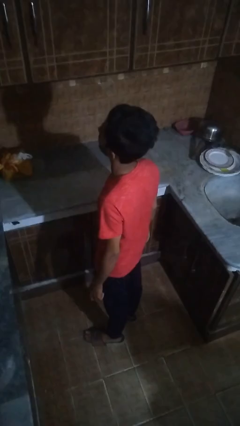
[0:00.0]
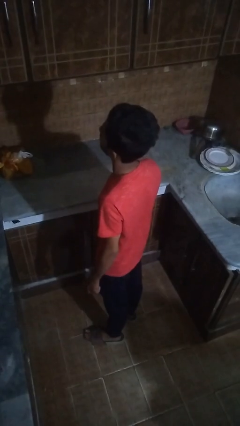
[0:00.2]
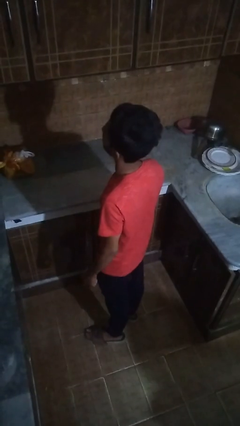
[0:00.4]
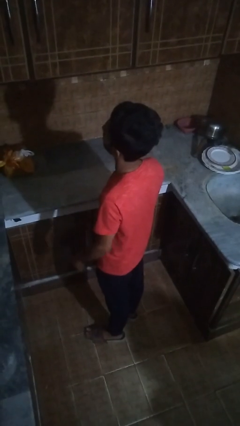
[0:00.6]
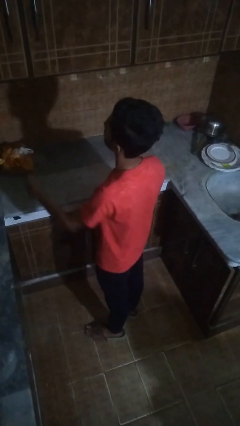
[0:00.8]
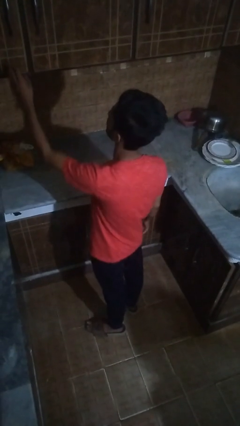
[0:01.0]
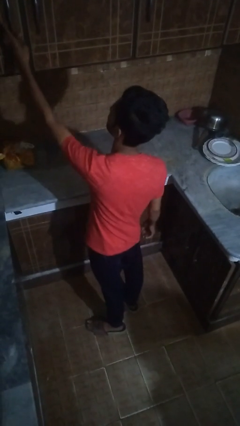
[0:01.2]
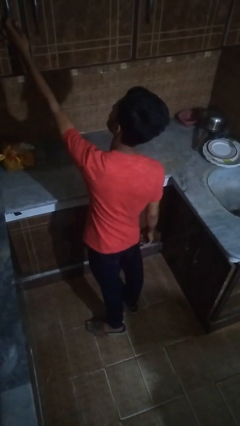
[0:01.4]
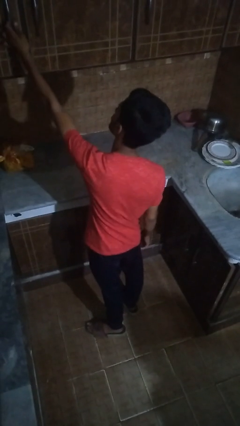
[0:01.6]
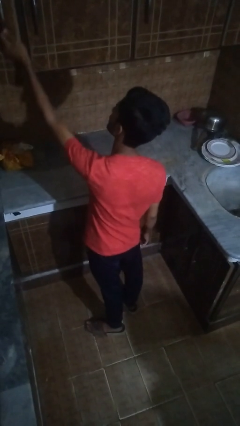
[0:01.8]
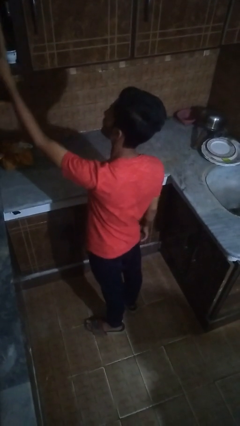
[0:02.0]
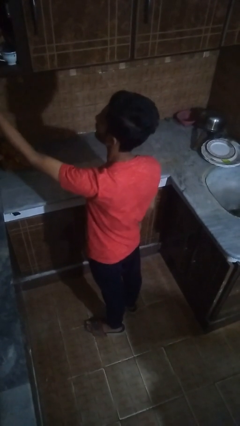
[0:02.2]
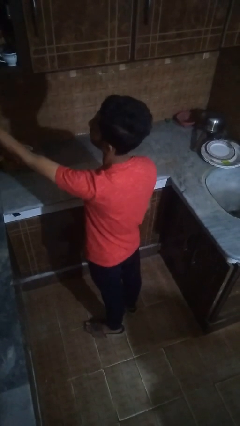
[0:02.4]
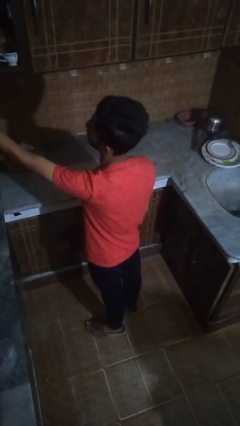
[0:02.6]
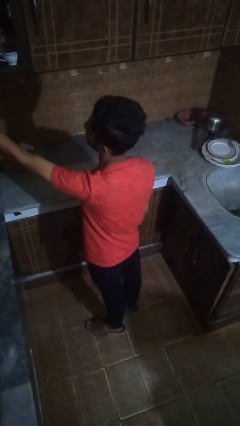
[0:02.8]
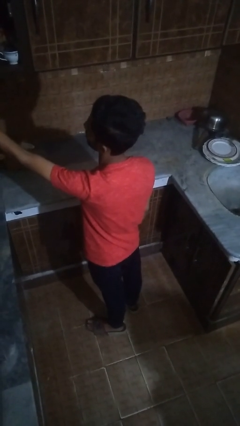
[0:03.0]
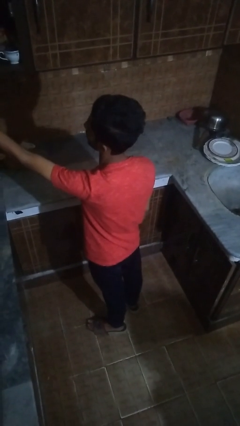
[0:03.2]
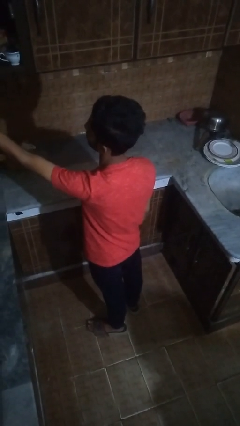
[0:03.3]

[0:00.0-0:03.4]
person opens cabinet

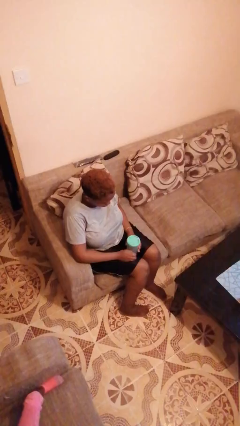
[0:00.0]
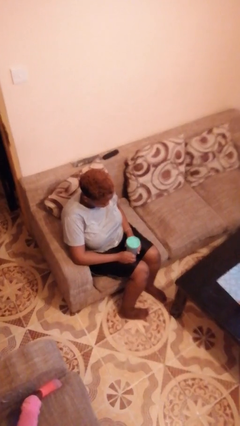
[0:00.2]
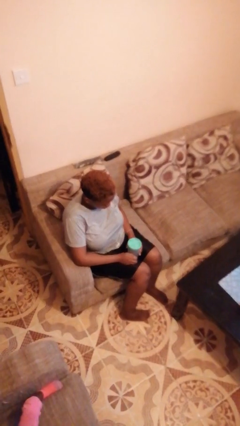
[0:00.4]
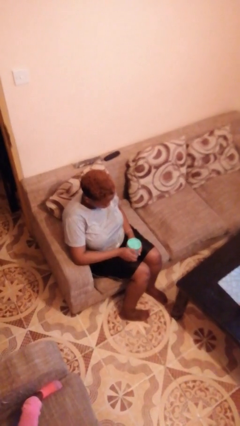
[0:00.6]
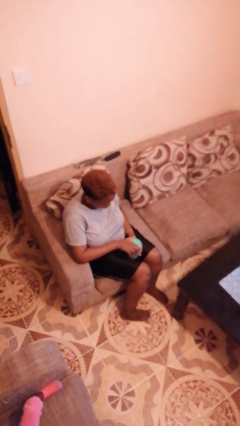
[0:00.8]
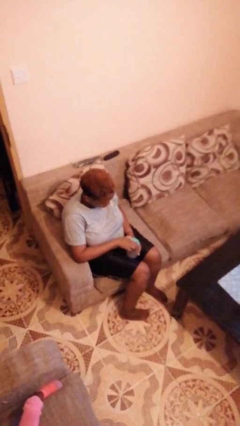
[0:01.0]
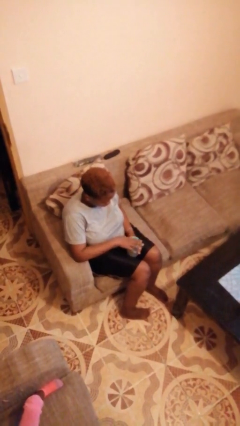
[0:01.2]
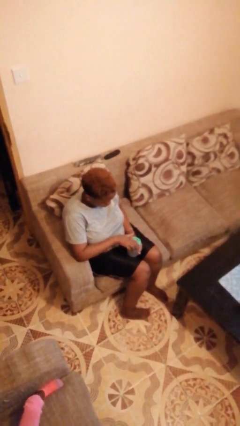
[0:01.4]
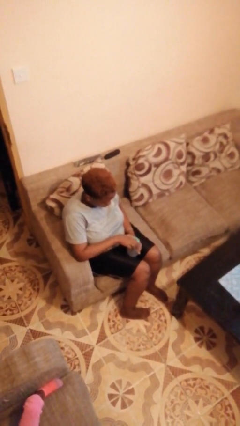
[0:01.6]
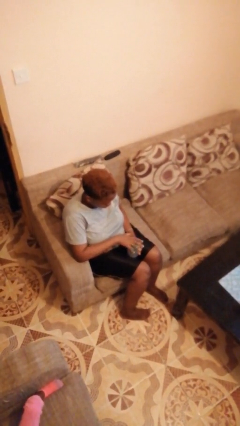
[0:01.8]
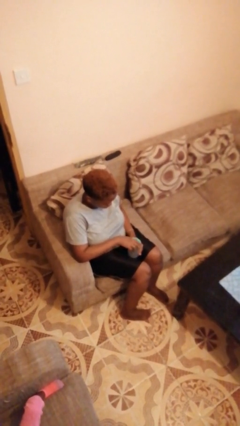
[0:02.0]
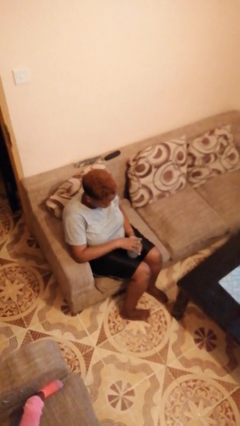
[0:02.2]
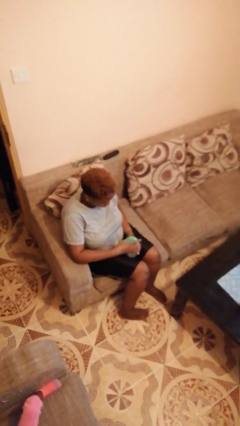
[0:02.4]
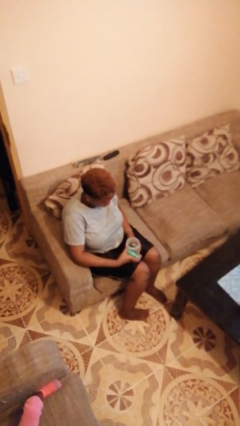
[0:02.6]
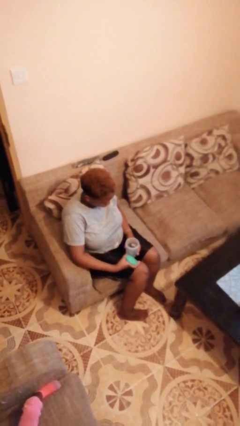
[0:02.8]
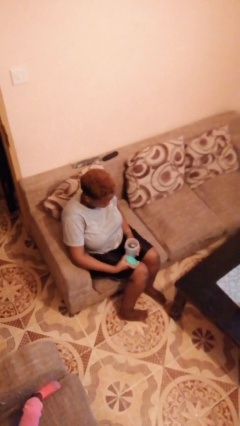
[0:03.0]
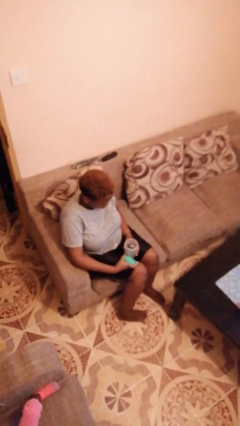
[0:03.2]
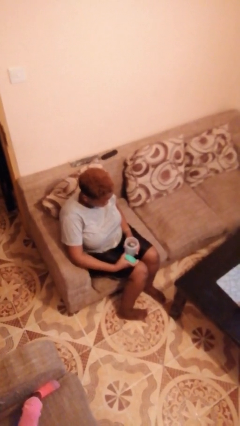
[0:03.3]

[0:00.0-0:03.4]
person opens jar

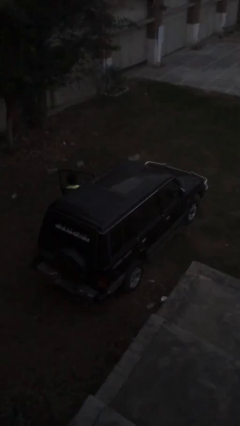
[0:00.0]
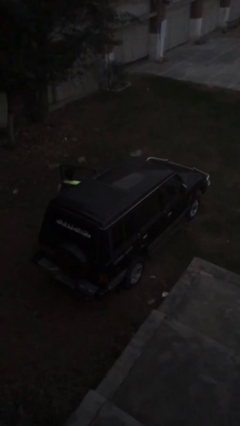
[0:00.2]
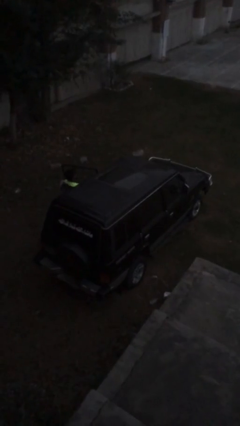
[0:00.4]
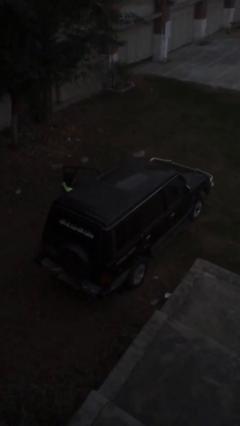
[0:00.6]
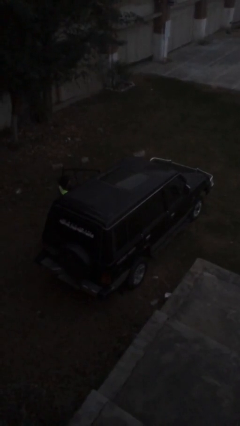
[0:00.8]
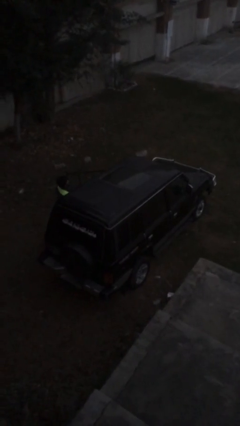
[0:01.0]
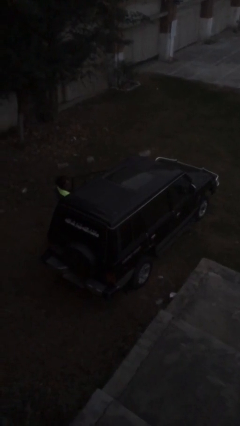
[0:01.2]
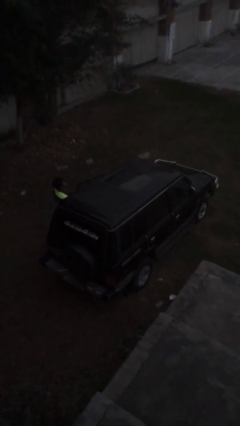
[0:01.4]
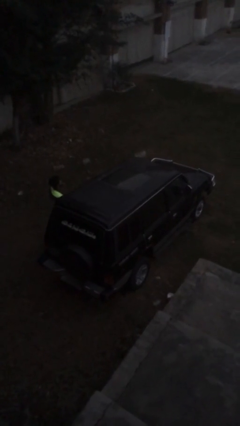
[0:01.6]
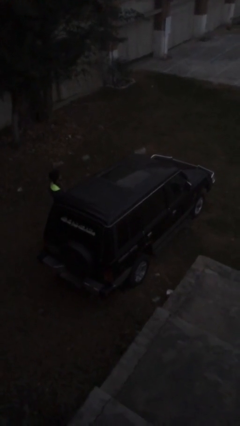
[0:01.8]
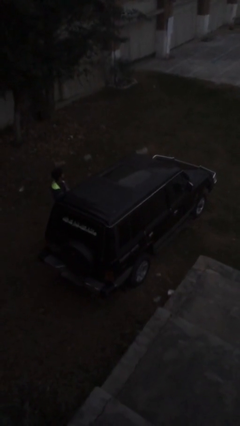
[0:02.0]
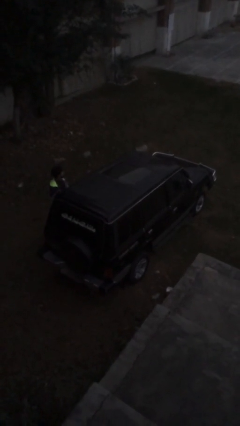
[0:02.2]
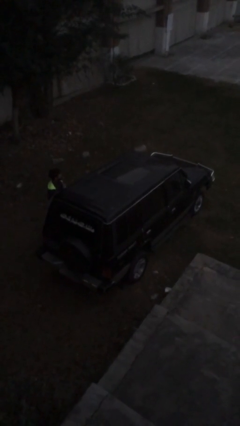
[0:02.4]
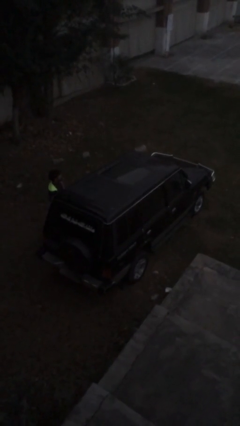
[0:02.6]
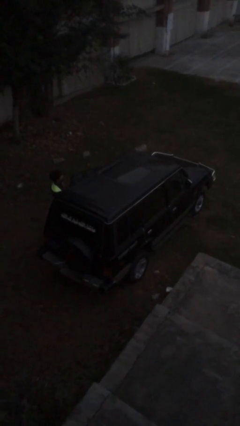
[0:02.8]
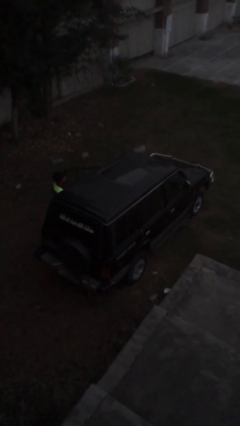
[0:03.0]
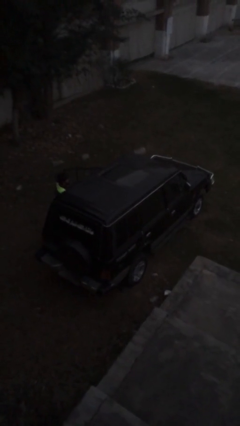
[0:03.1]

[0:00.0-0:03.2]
car drops off person

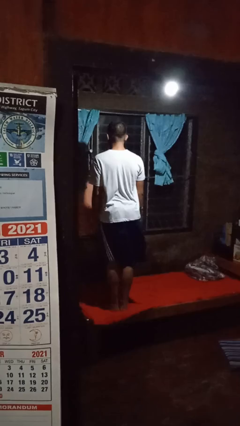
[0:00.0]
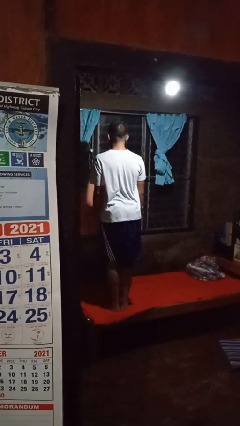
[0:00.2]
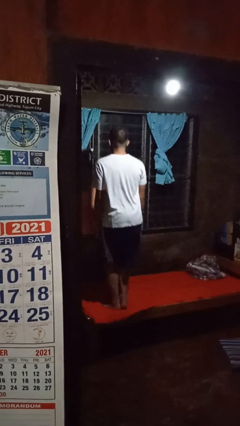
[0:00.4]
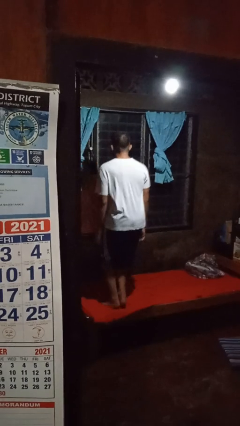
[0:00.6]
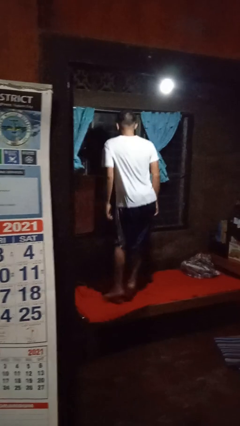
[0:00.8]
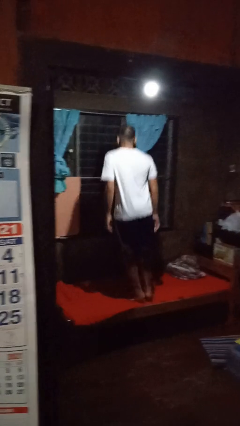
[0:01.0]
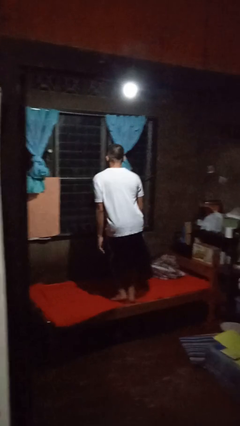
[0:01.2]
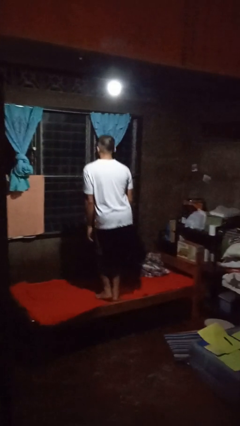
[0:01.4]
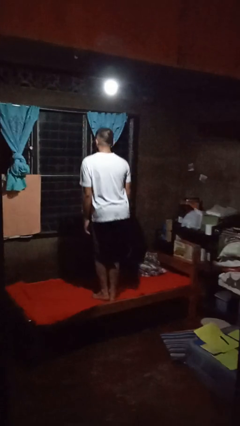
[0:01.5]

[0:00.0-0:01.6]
person jumps on bed

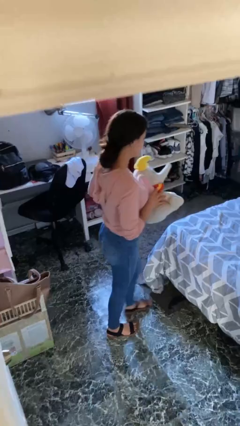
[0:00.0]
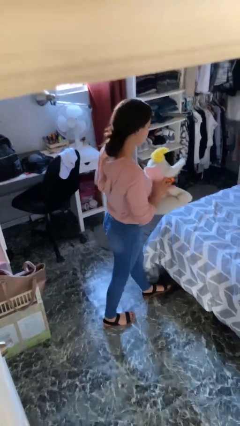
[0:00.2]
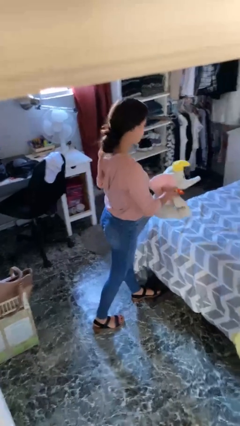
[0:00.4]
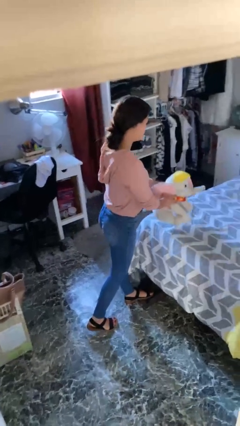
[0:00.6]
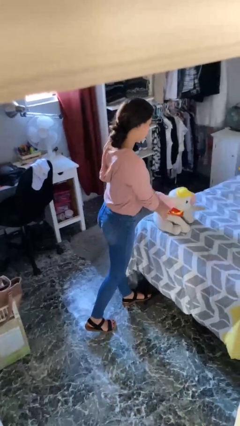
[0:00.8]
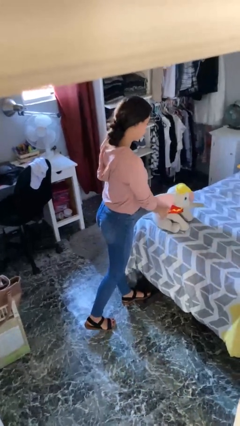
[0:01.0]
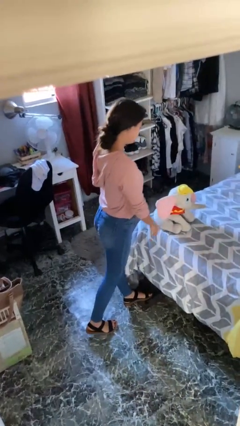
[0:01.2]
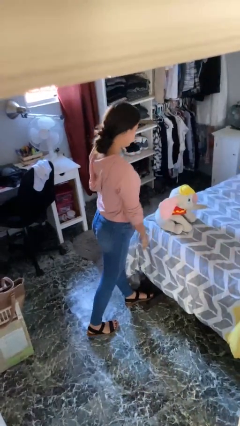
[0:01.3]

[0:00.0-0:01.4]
person puts down object on bed

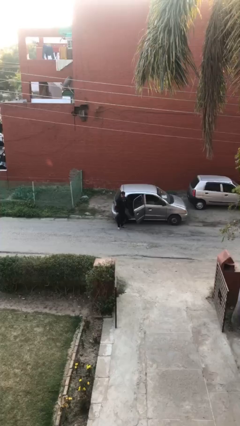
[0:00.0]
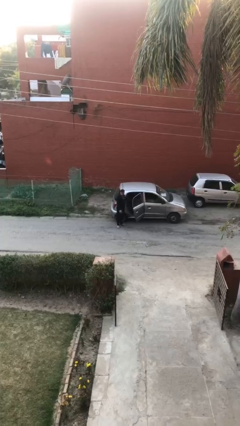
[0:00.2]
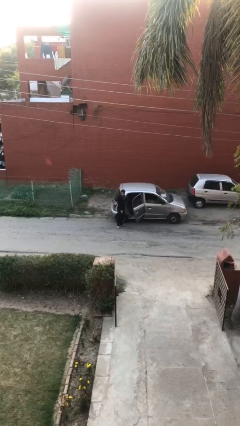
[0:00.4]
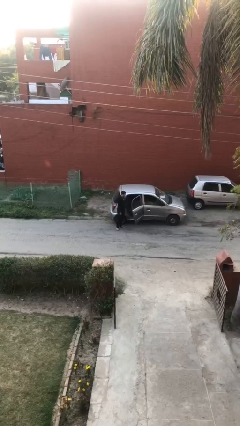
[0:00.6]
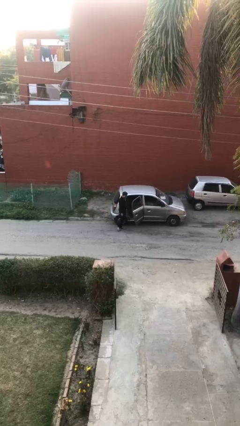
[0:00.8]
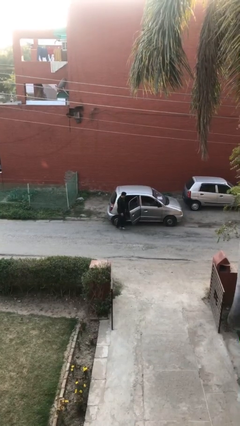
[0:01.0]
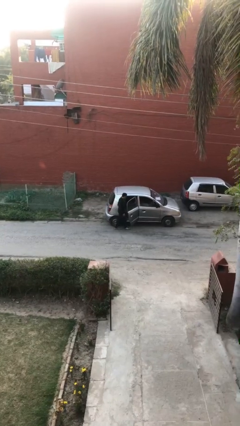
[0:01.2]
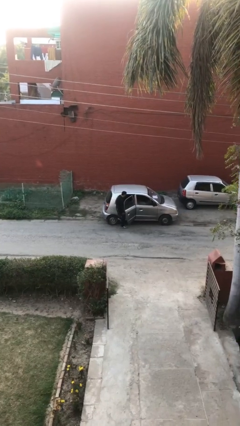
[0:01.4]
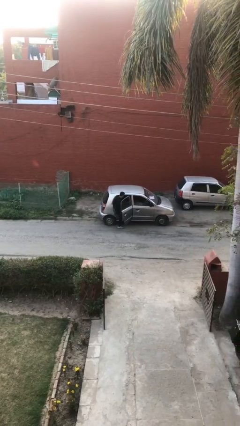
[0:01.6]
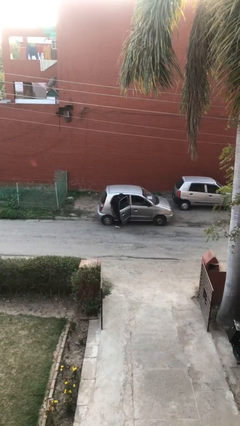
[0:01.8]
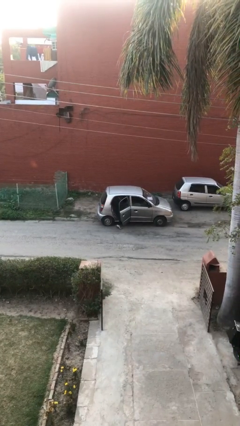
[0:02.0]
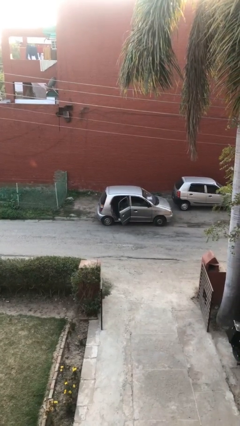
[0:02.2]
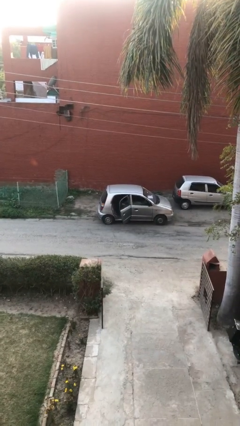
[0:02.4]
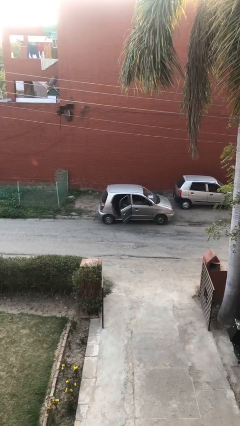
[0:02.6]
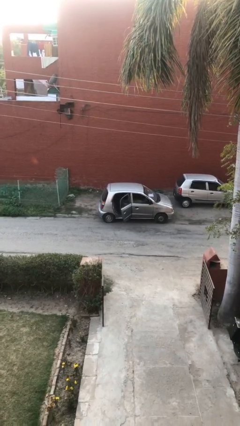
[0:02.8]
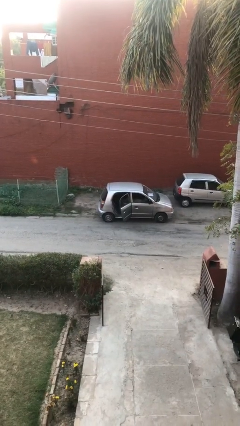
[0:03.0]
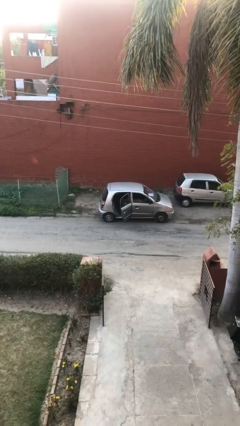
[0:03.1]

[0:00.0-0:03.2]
person enters car

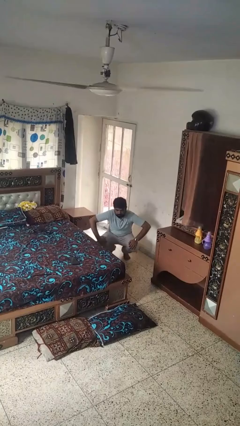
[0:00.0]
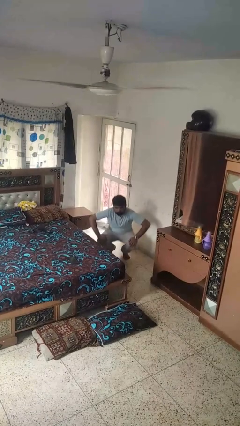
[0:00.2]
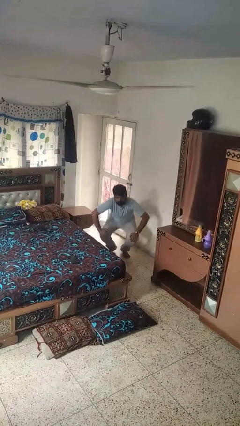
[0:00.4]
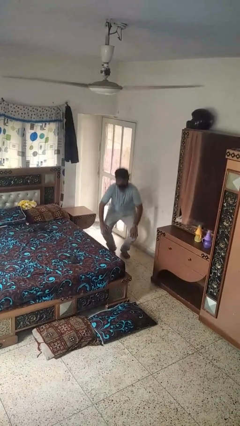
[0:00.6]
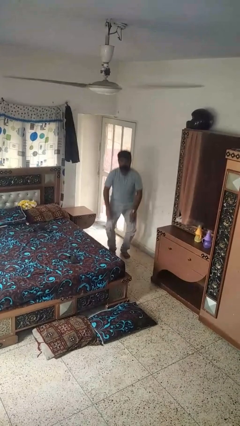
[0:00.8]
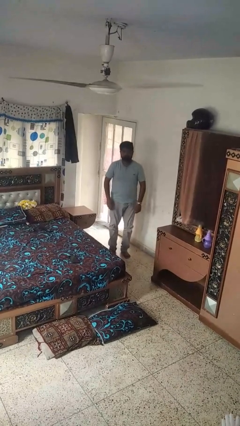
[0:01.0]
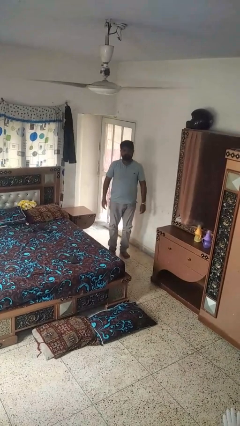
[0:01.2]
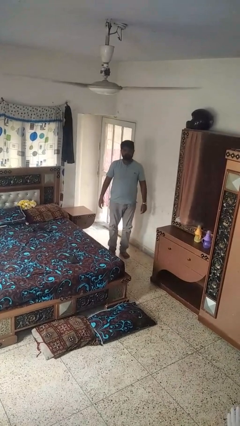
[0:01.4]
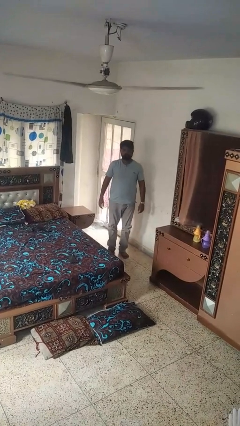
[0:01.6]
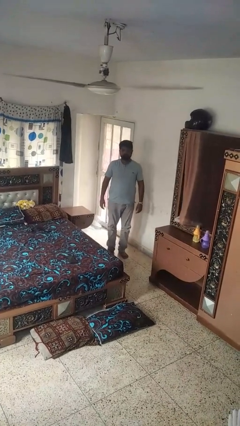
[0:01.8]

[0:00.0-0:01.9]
person stands up
